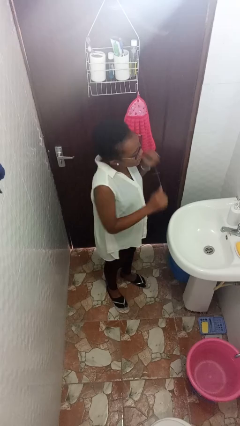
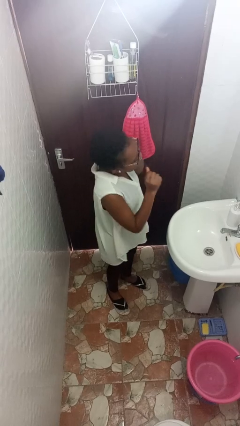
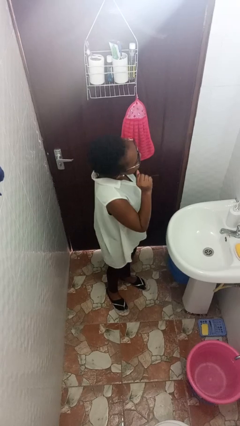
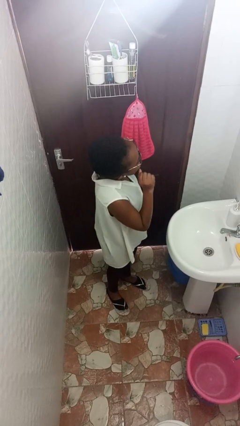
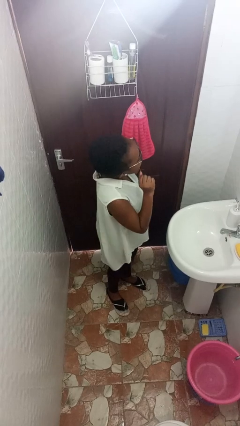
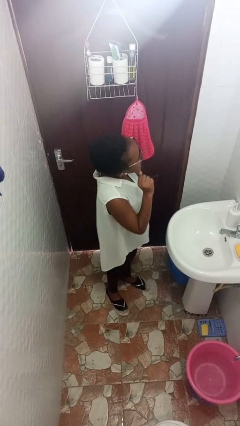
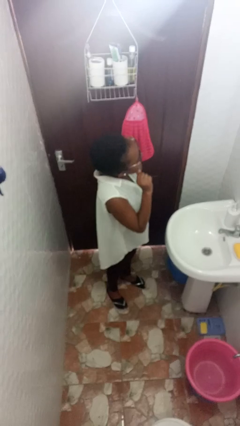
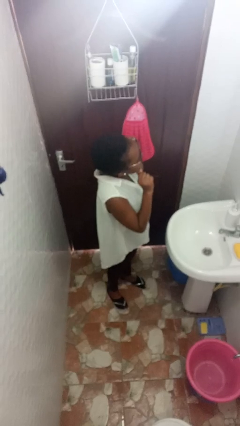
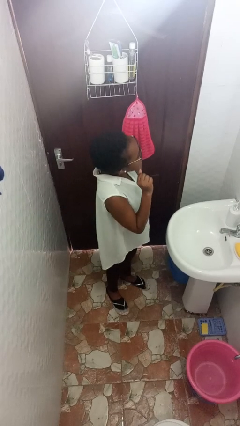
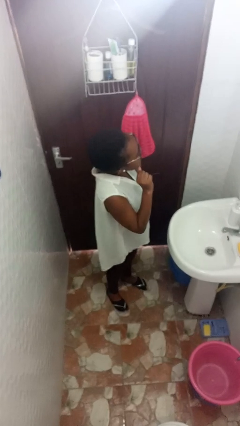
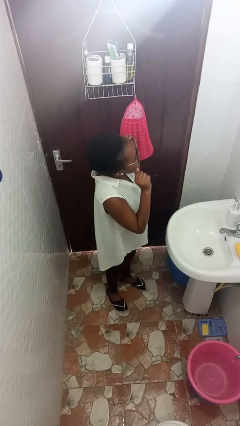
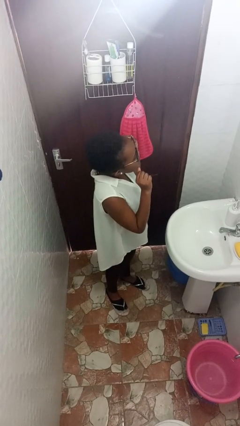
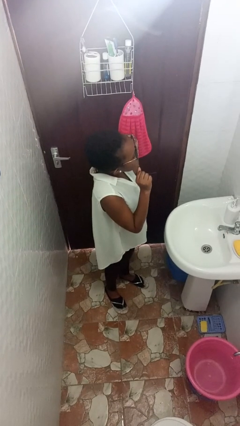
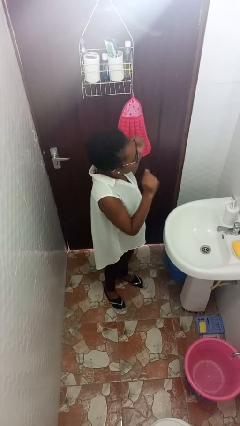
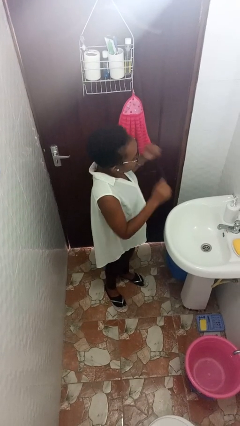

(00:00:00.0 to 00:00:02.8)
person flosses

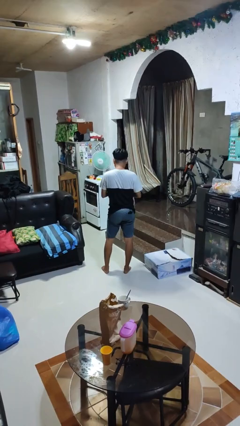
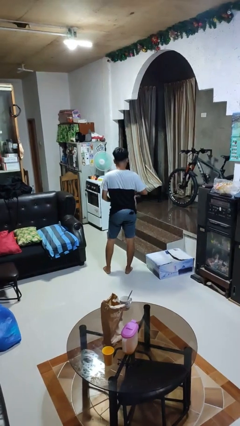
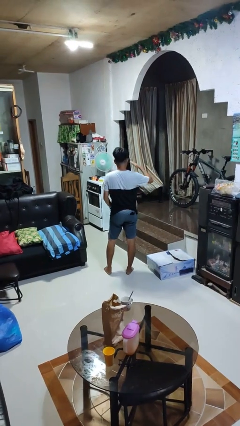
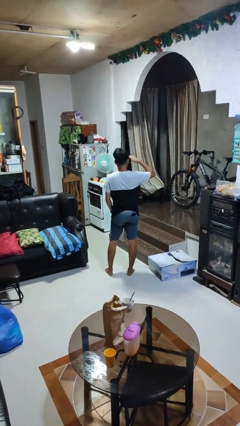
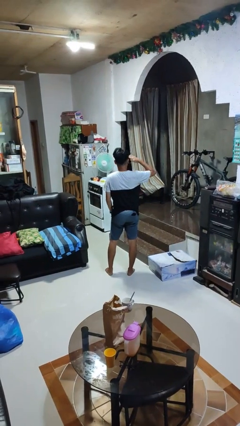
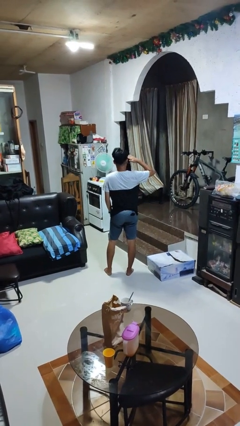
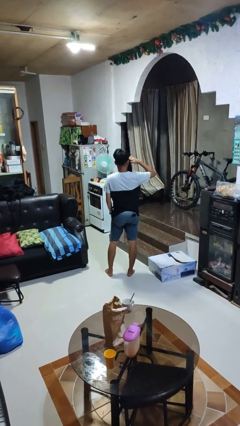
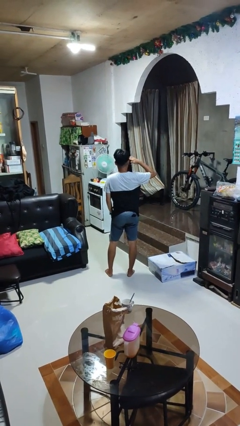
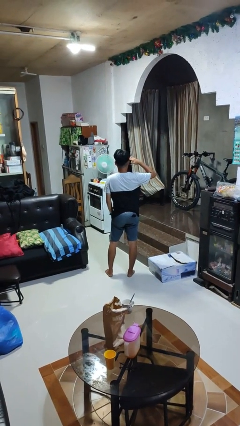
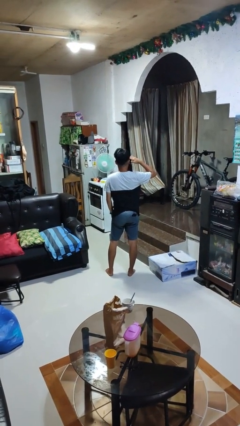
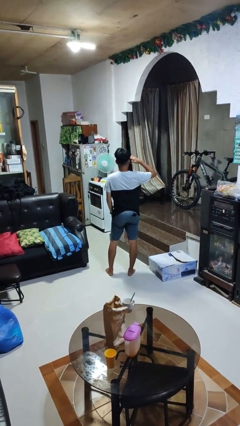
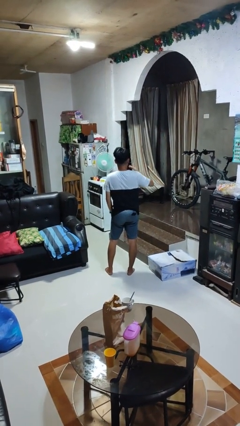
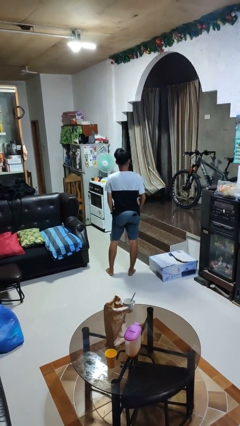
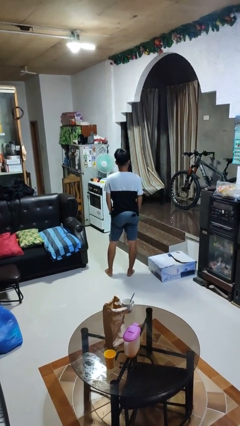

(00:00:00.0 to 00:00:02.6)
person salutes

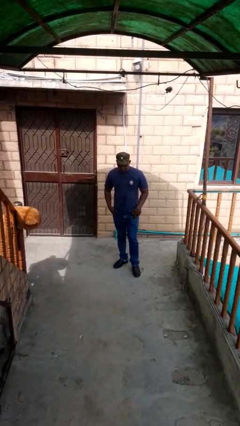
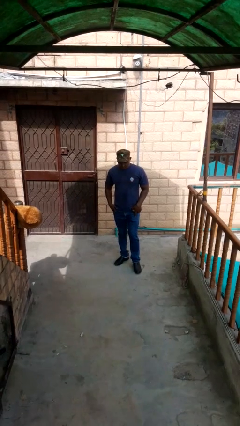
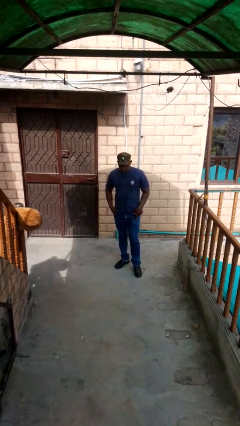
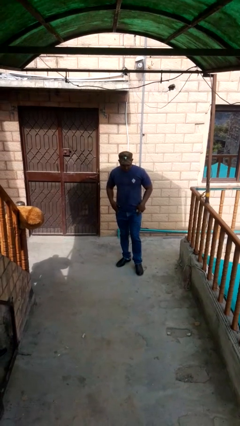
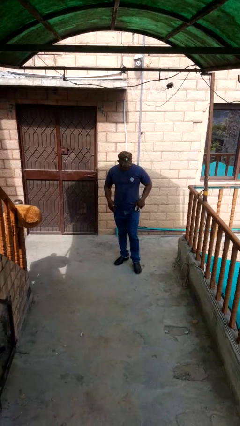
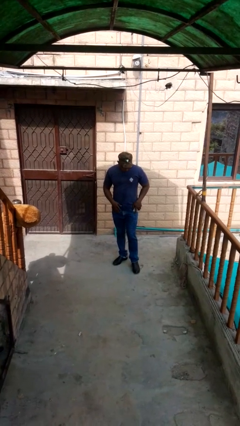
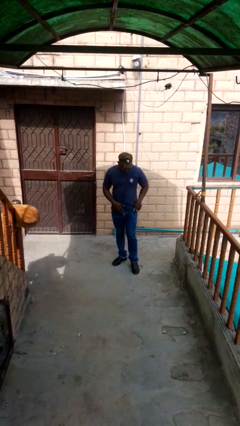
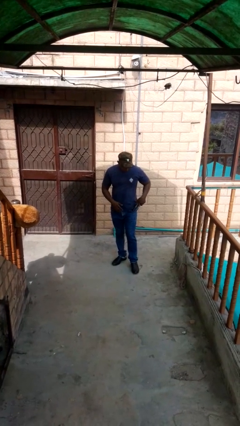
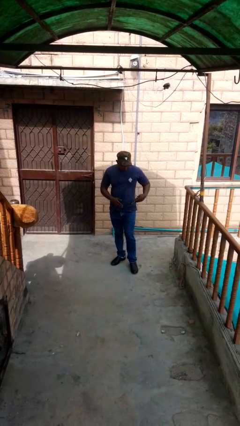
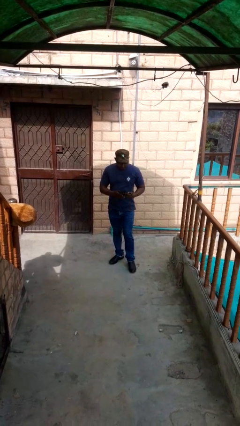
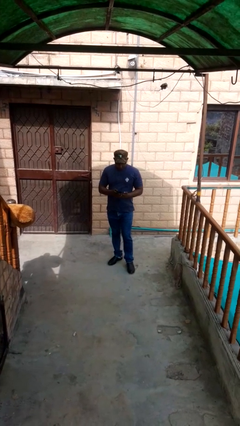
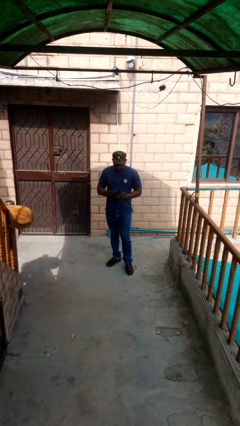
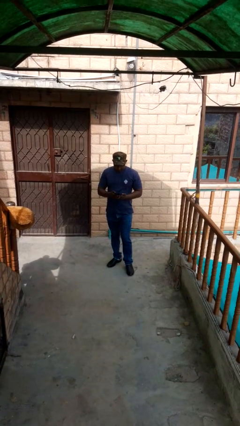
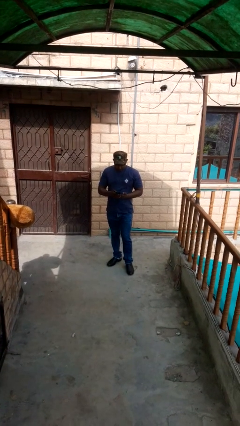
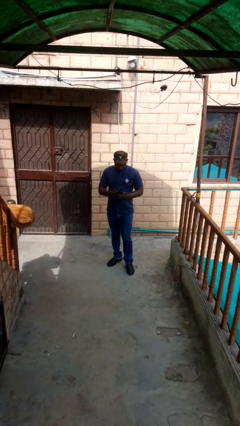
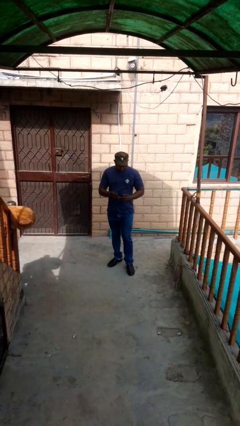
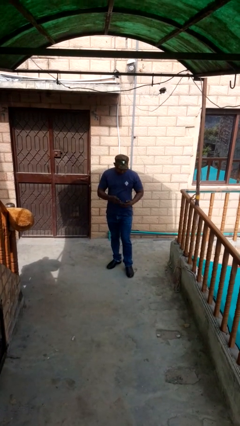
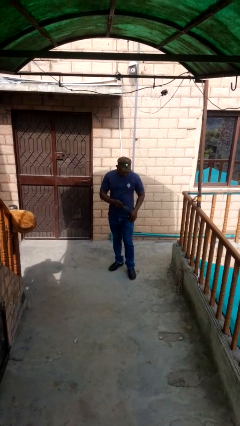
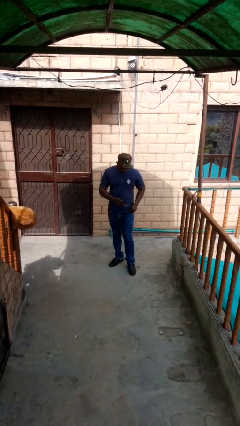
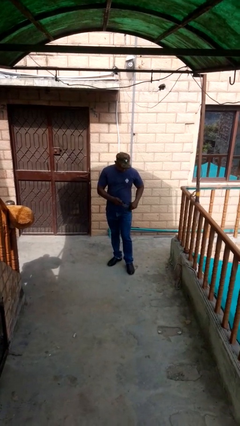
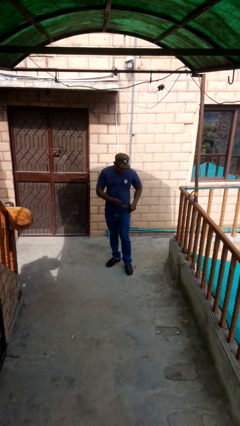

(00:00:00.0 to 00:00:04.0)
person takes phone from pocket

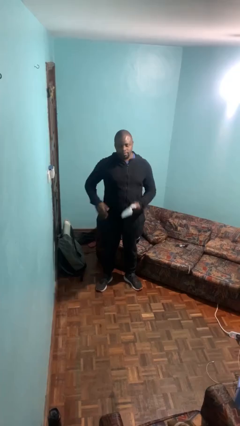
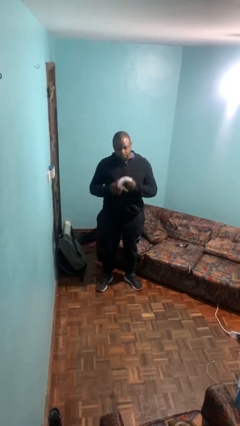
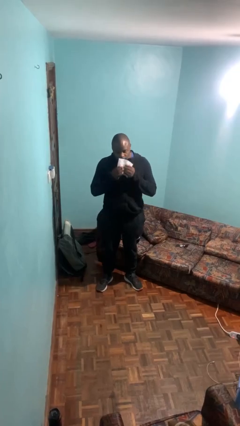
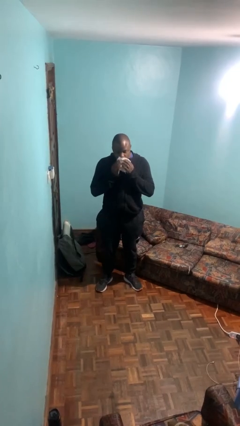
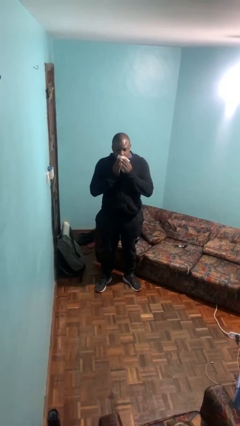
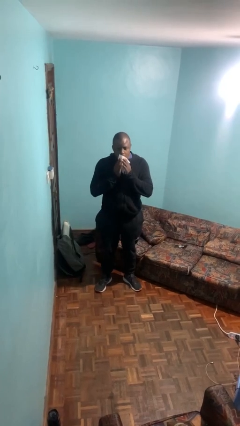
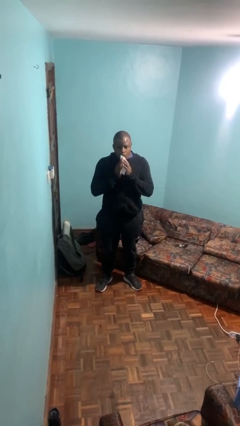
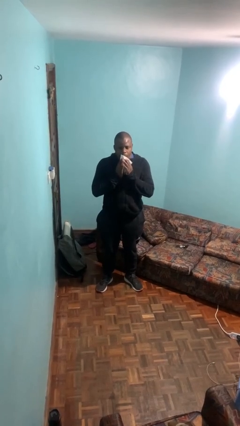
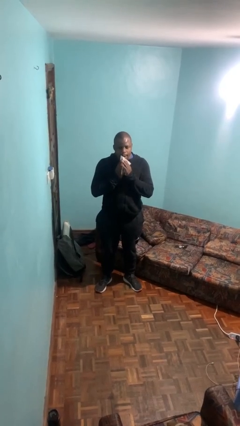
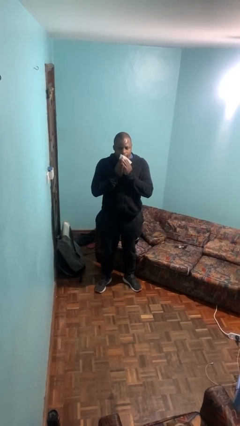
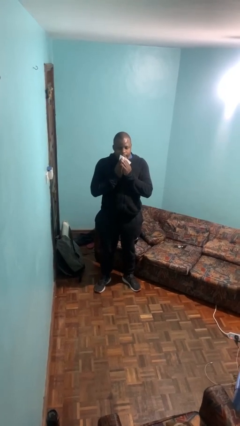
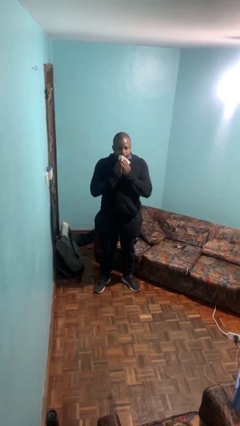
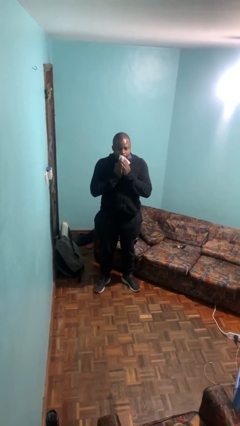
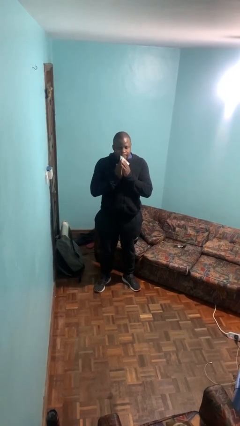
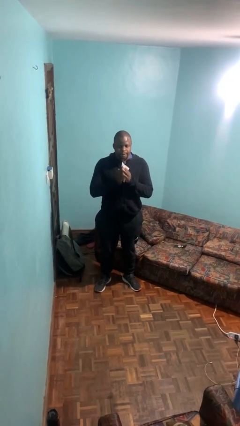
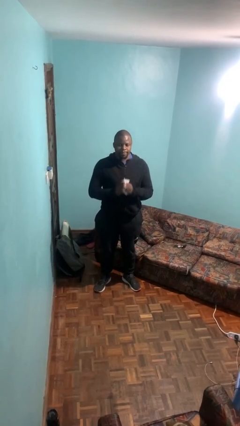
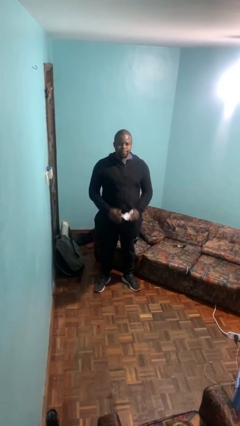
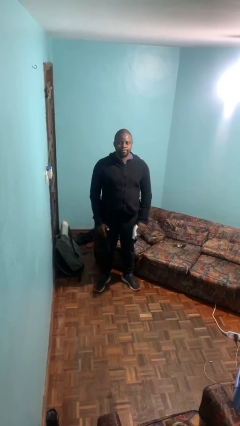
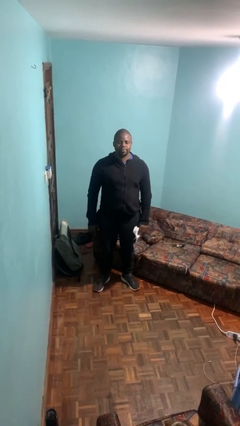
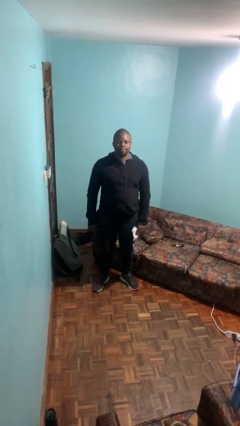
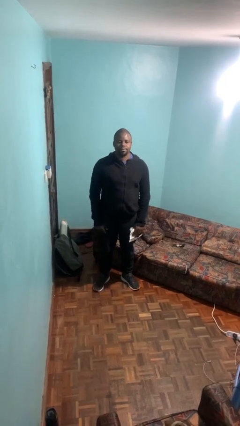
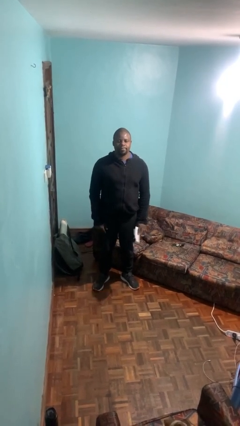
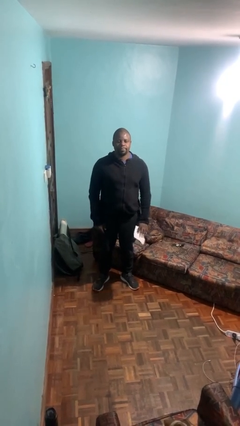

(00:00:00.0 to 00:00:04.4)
person wipes mouth with napkin

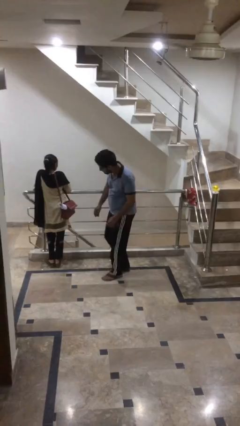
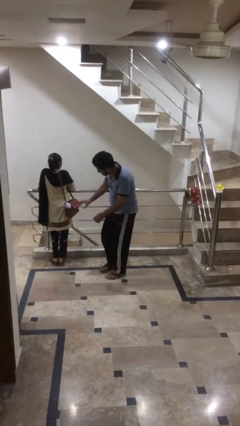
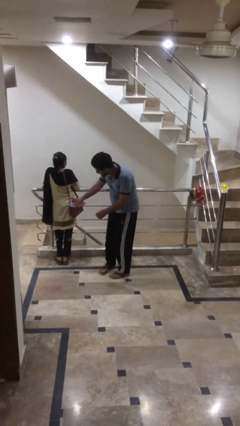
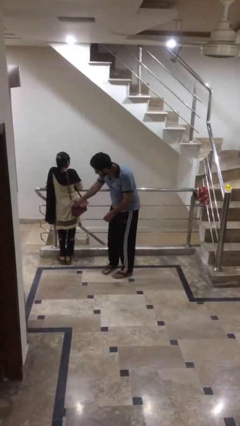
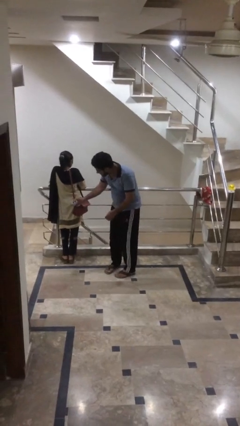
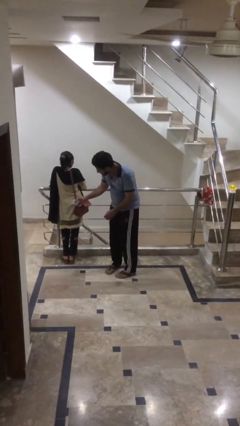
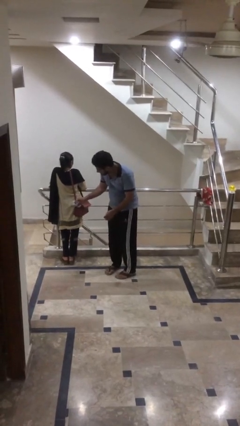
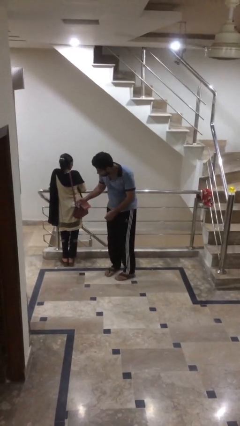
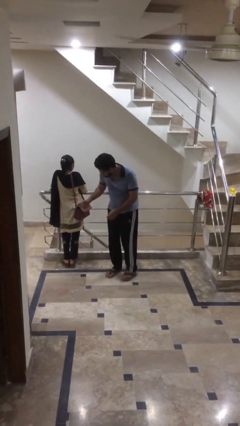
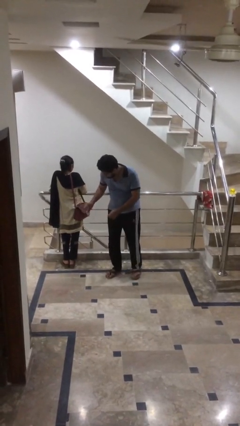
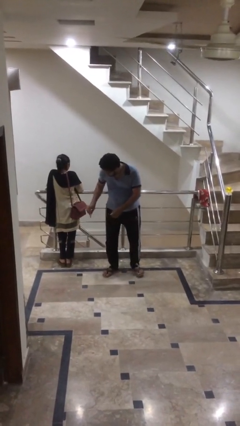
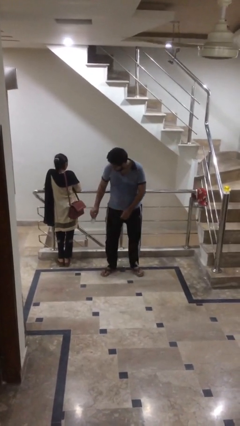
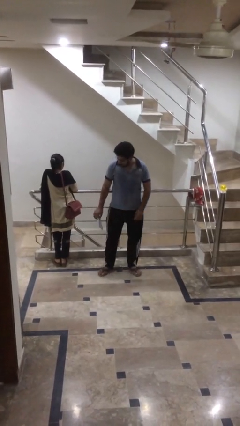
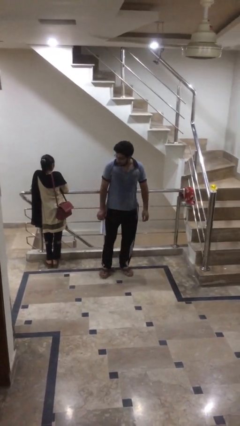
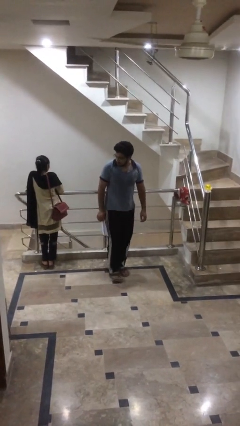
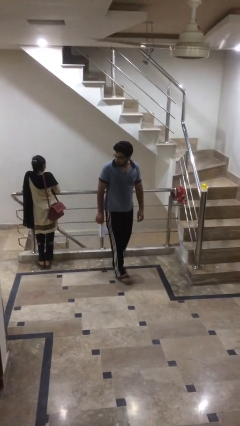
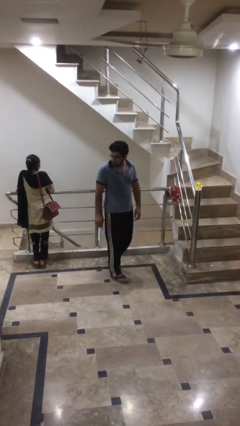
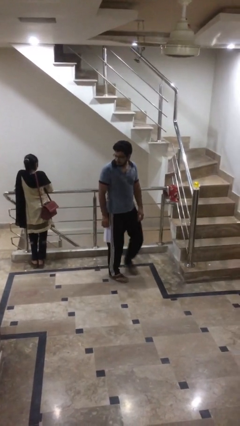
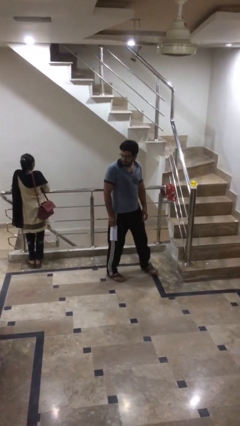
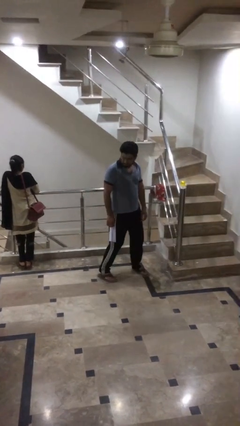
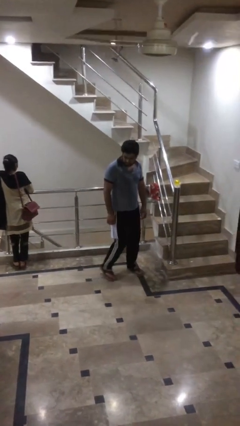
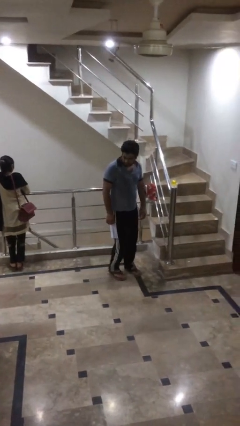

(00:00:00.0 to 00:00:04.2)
person steals object from person

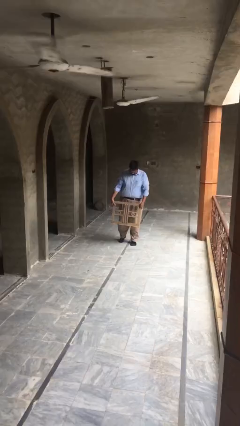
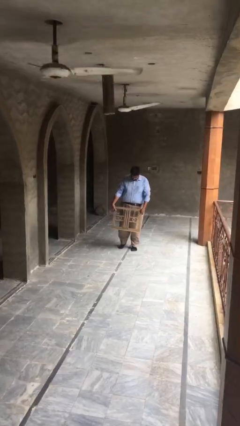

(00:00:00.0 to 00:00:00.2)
person carries heavy object
